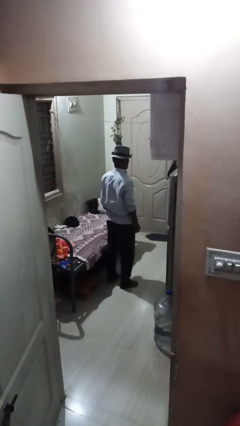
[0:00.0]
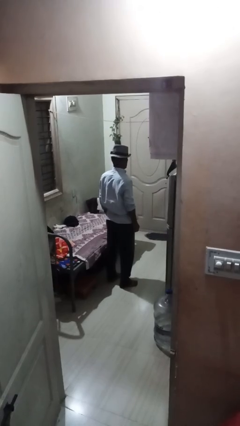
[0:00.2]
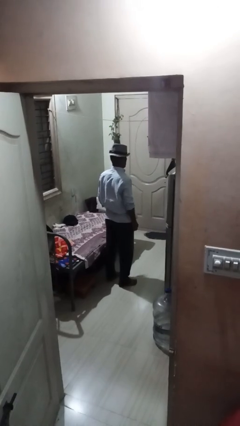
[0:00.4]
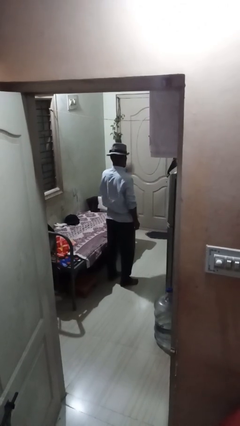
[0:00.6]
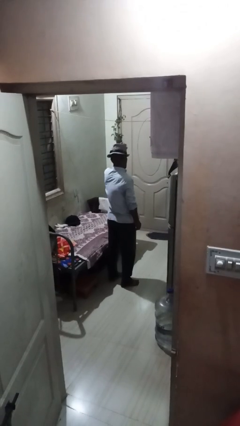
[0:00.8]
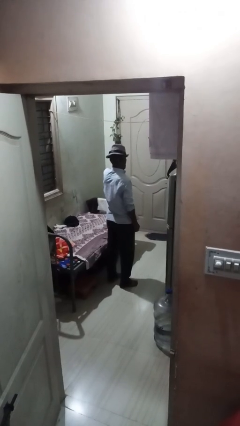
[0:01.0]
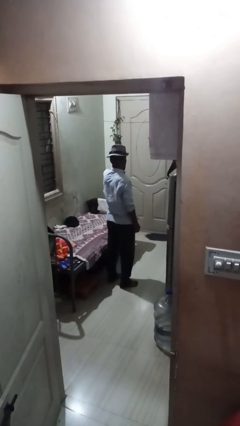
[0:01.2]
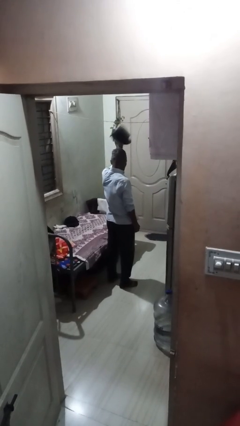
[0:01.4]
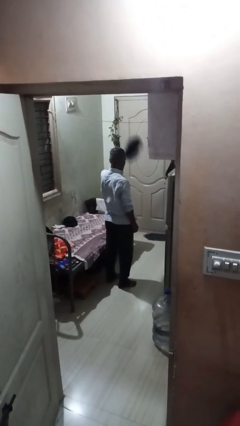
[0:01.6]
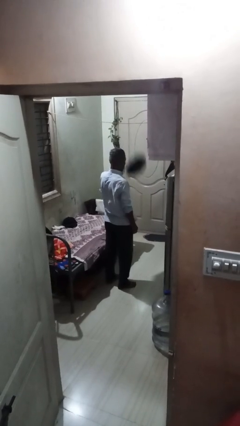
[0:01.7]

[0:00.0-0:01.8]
person takes off hat

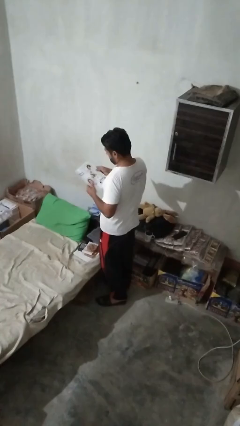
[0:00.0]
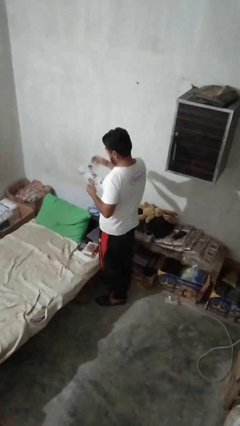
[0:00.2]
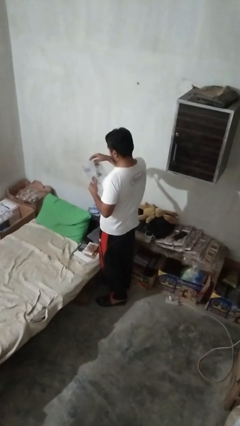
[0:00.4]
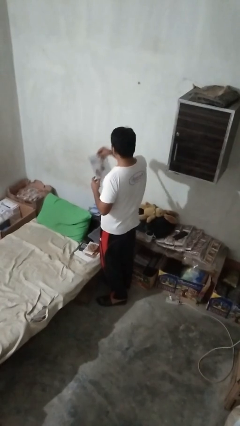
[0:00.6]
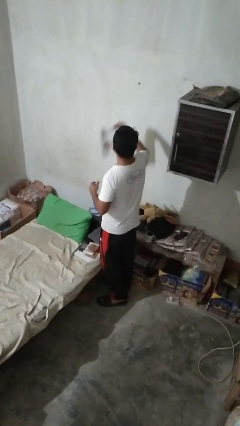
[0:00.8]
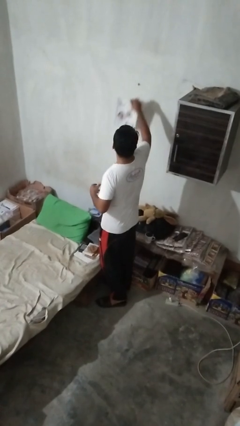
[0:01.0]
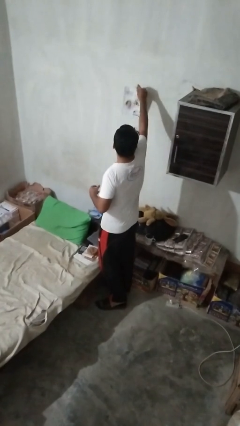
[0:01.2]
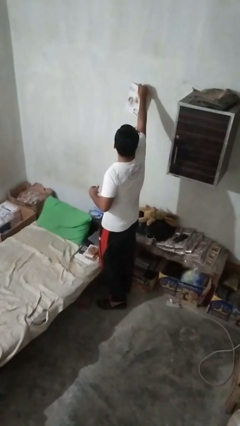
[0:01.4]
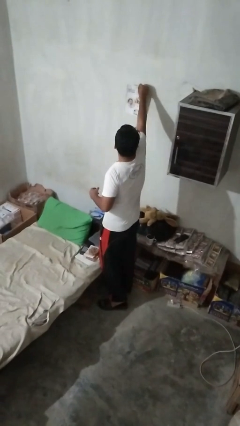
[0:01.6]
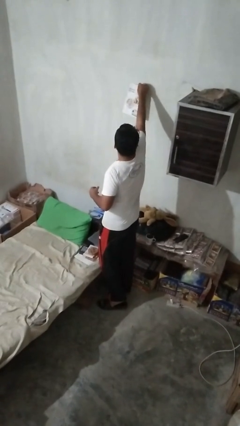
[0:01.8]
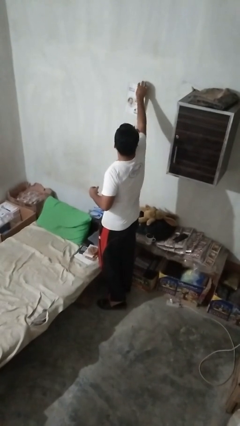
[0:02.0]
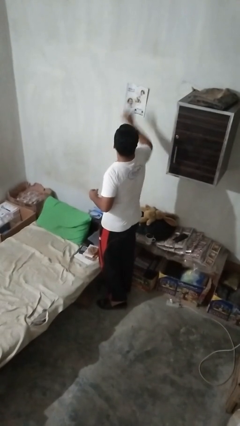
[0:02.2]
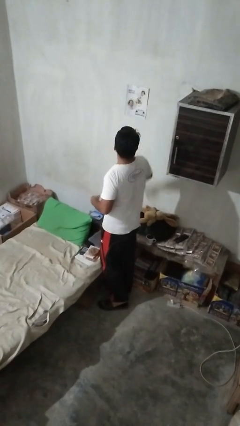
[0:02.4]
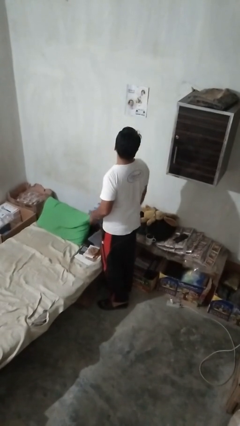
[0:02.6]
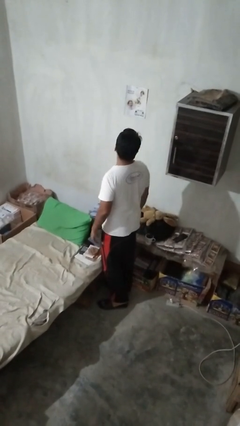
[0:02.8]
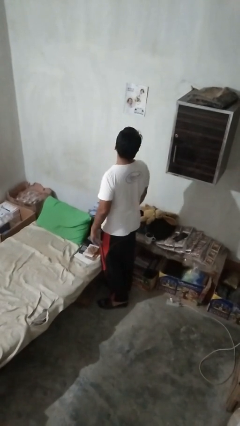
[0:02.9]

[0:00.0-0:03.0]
person puts up picture frame

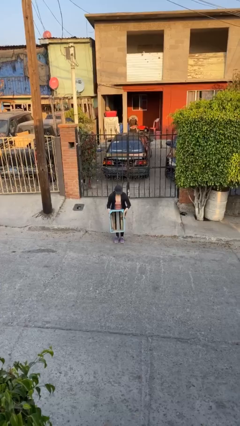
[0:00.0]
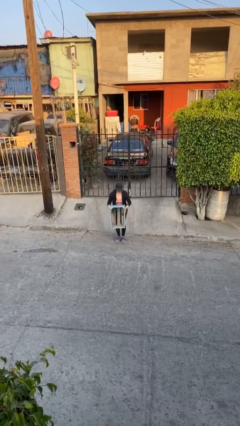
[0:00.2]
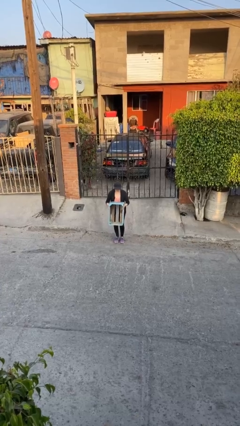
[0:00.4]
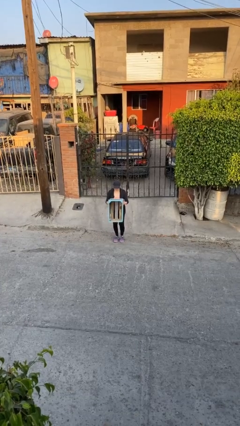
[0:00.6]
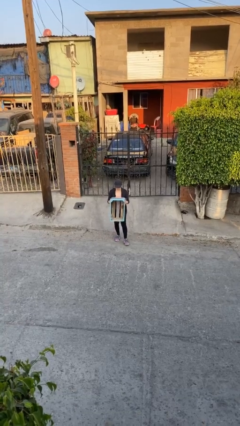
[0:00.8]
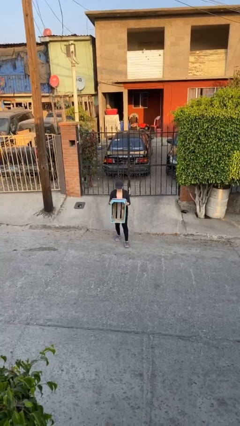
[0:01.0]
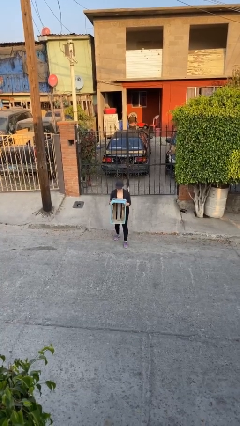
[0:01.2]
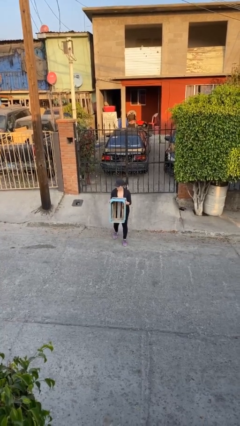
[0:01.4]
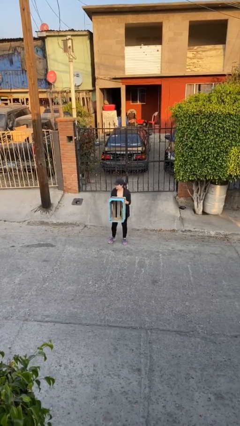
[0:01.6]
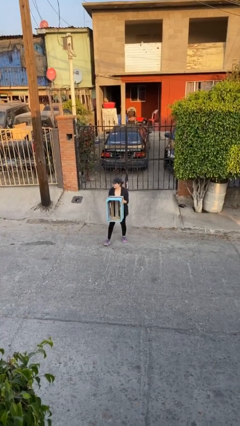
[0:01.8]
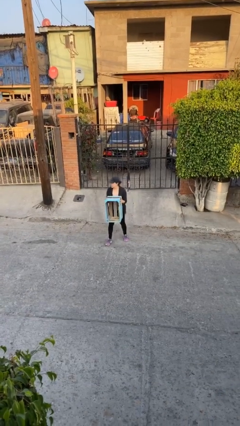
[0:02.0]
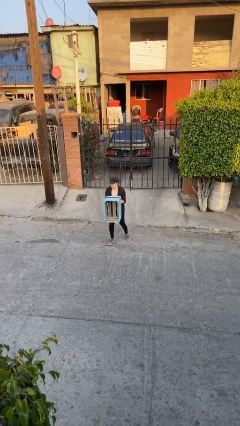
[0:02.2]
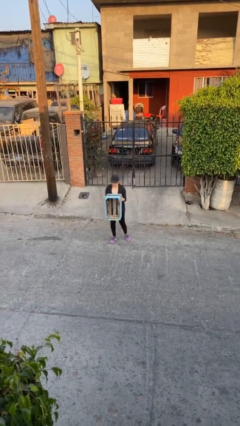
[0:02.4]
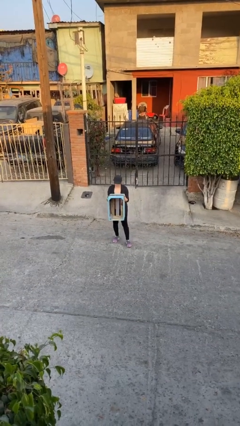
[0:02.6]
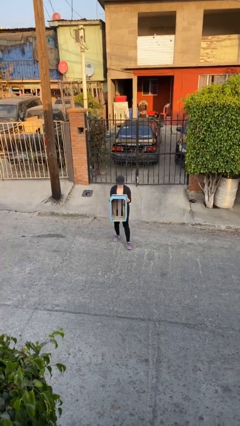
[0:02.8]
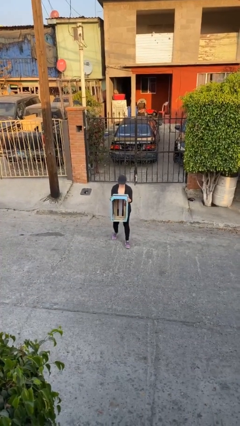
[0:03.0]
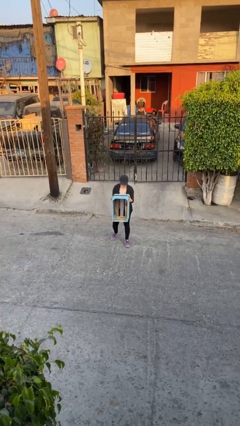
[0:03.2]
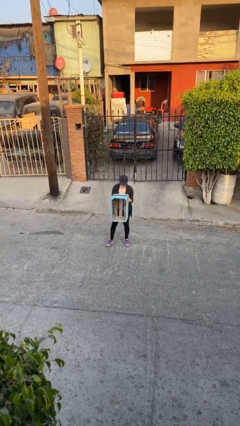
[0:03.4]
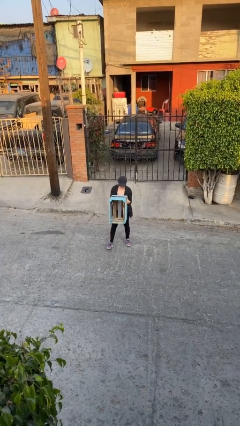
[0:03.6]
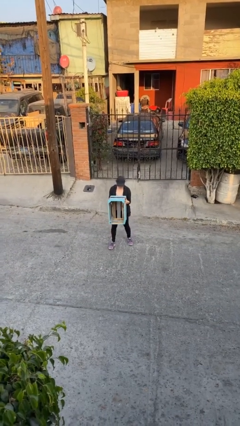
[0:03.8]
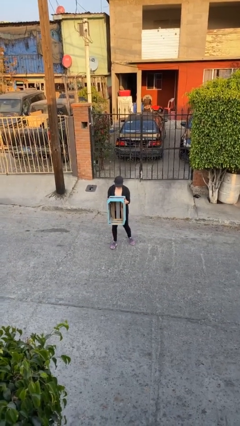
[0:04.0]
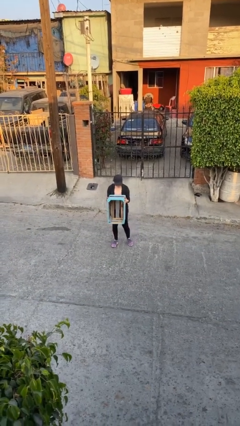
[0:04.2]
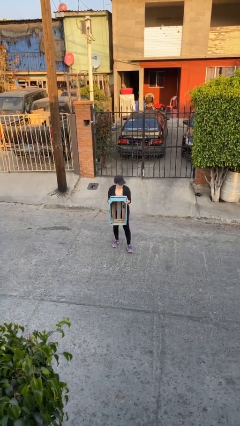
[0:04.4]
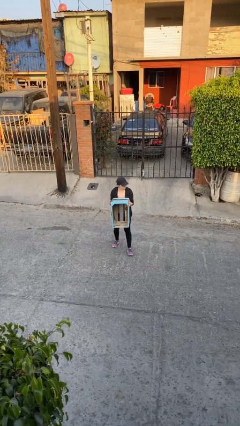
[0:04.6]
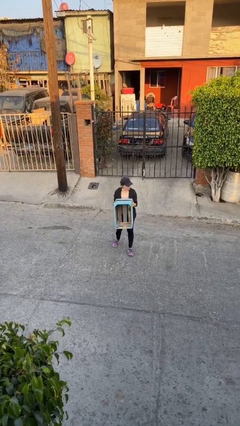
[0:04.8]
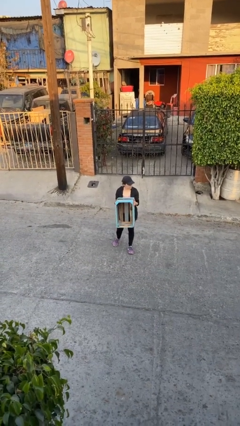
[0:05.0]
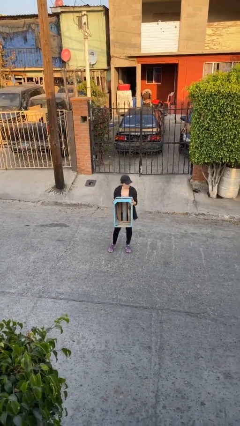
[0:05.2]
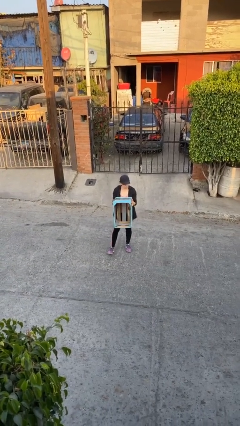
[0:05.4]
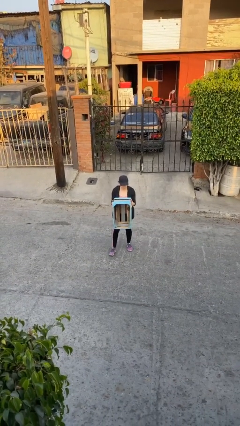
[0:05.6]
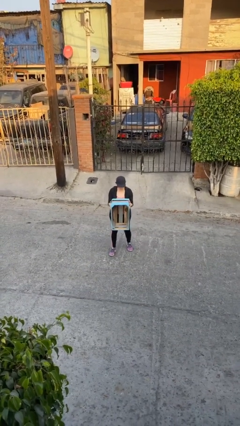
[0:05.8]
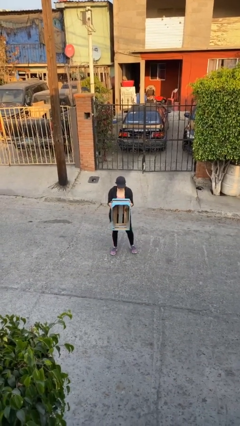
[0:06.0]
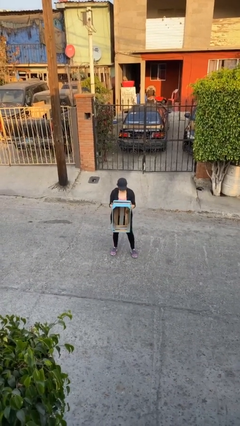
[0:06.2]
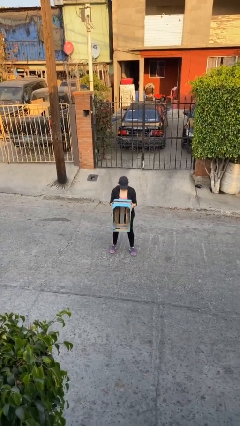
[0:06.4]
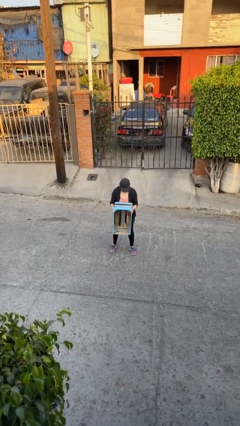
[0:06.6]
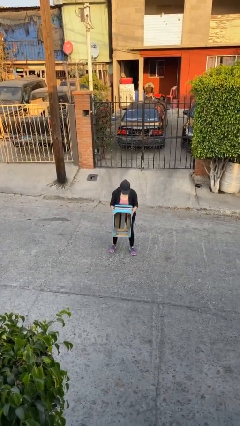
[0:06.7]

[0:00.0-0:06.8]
person carries heavy object

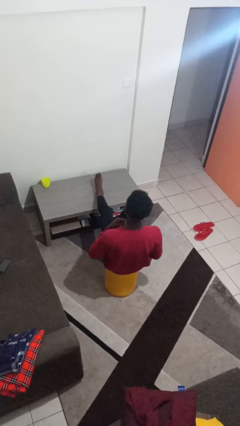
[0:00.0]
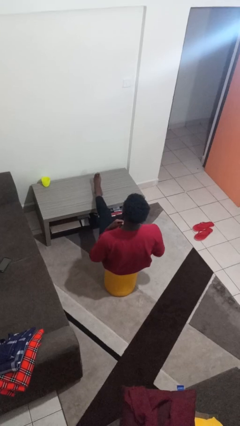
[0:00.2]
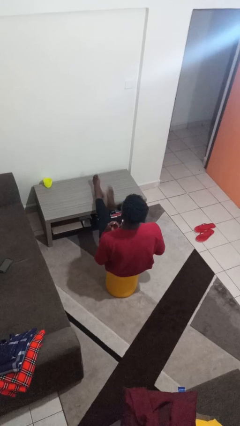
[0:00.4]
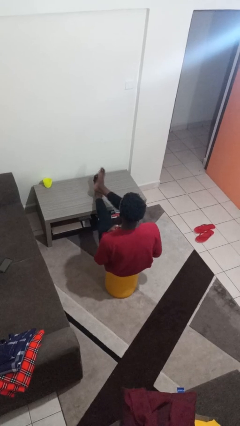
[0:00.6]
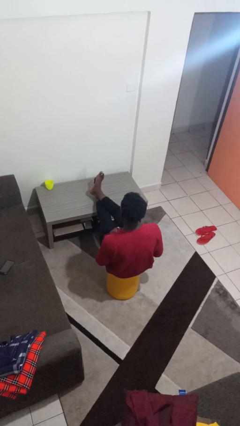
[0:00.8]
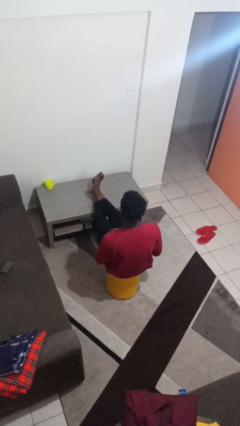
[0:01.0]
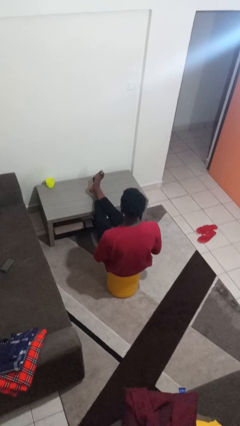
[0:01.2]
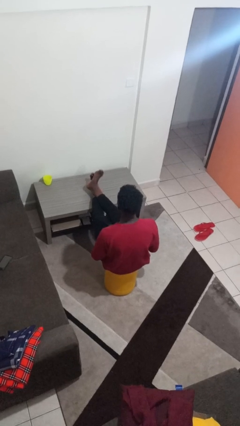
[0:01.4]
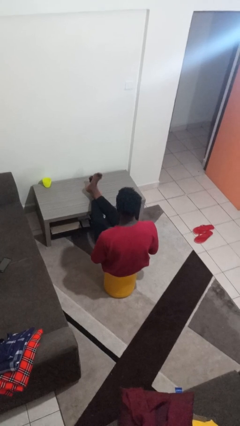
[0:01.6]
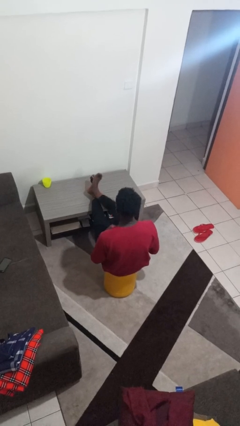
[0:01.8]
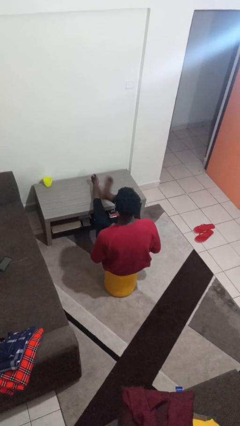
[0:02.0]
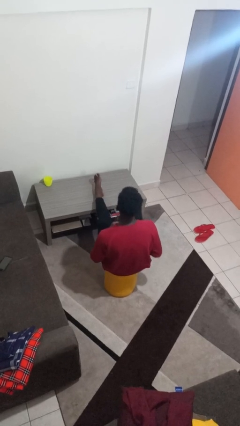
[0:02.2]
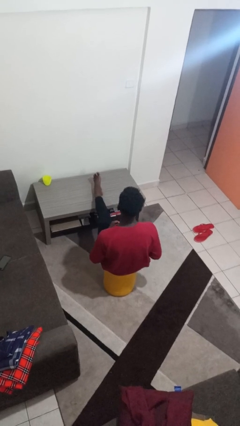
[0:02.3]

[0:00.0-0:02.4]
person puts feet up

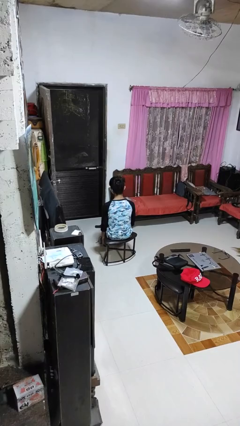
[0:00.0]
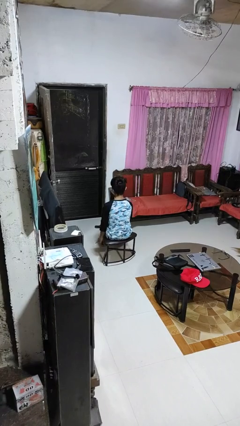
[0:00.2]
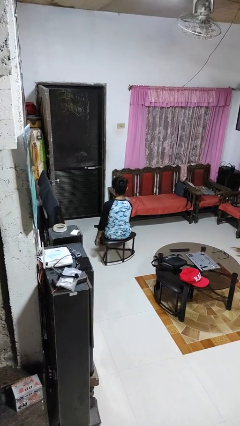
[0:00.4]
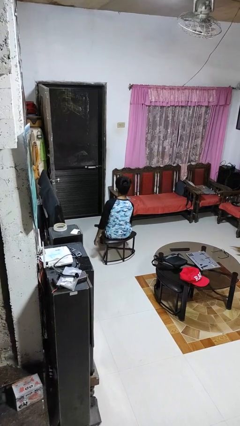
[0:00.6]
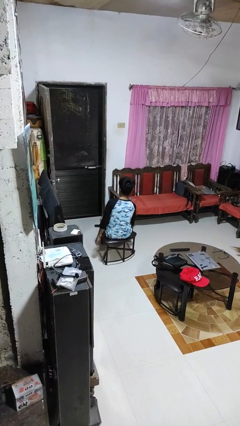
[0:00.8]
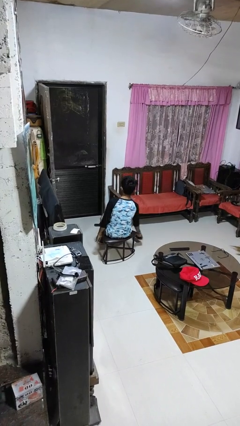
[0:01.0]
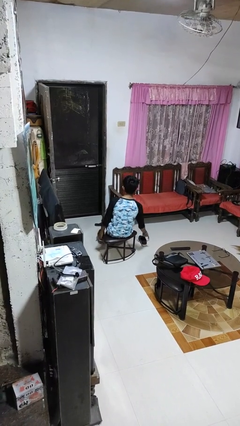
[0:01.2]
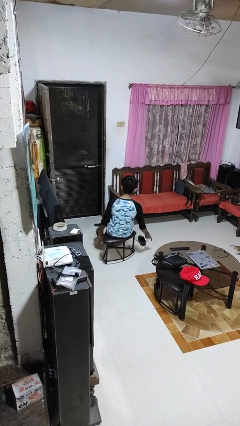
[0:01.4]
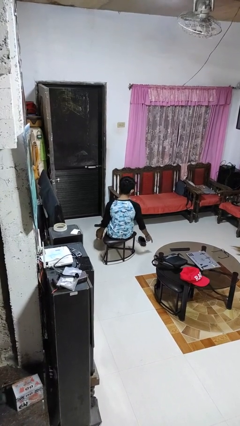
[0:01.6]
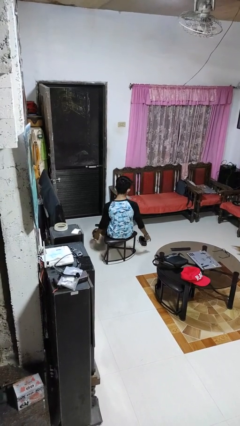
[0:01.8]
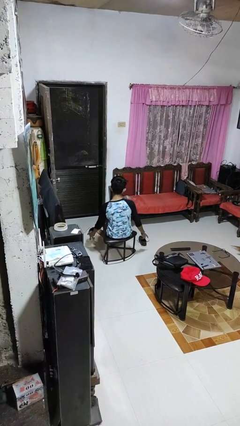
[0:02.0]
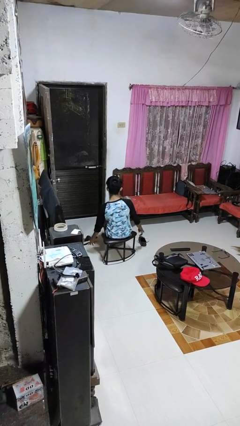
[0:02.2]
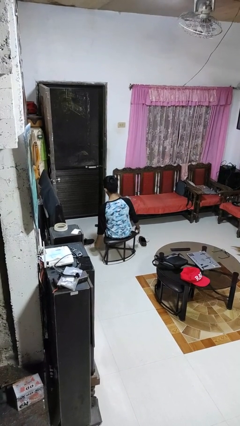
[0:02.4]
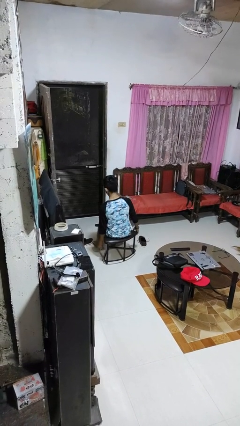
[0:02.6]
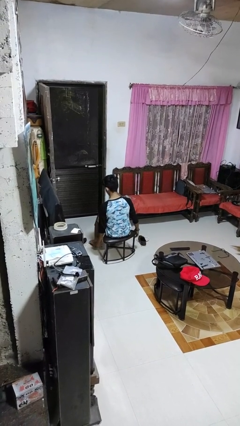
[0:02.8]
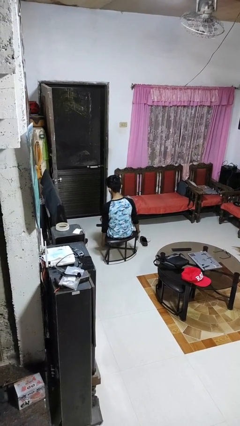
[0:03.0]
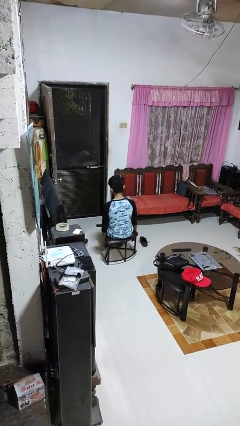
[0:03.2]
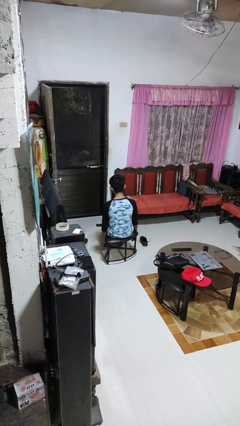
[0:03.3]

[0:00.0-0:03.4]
person takes off shoes
